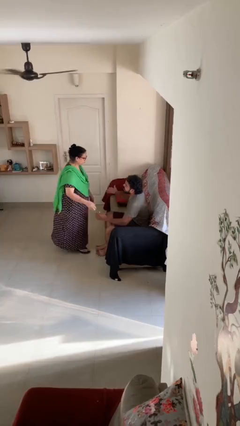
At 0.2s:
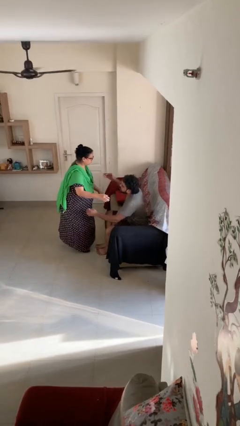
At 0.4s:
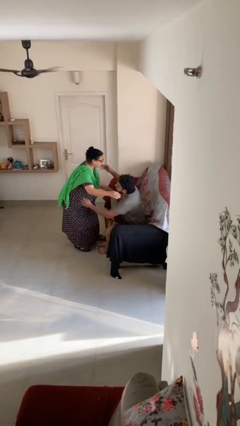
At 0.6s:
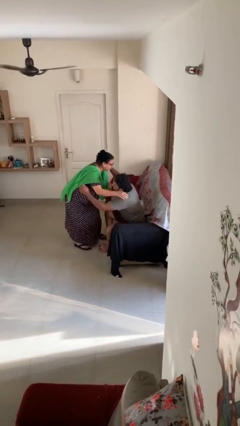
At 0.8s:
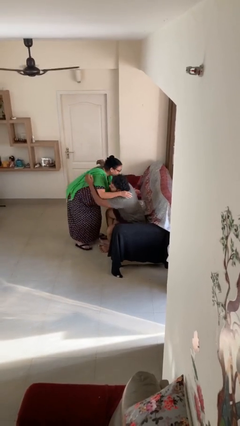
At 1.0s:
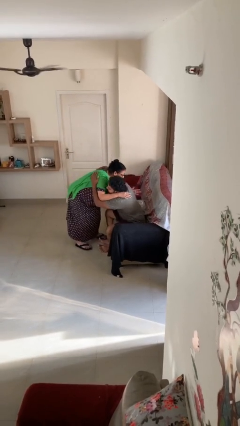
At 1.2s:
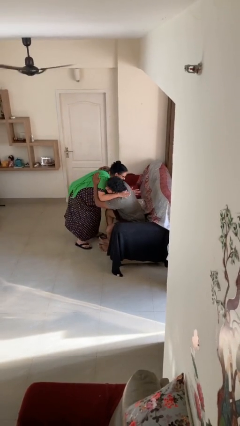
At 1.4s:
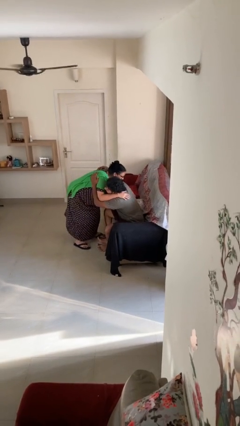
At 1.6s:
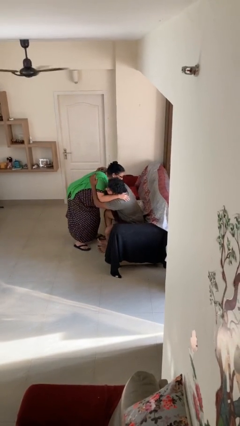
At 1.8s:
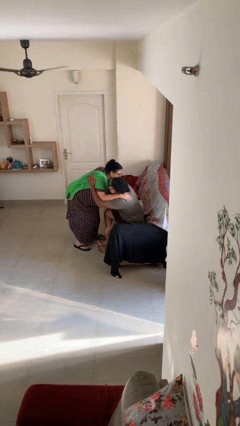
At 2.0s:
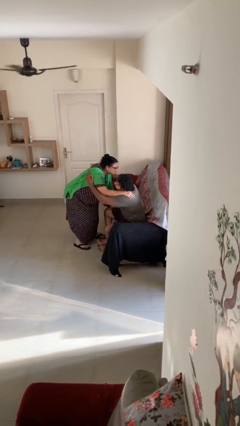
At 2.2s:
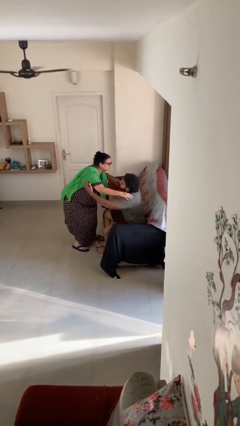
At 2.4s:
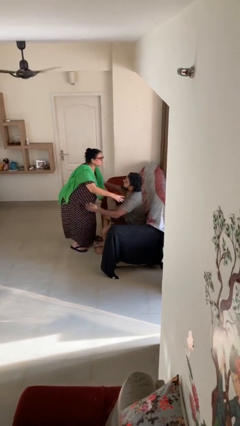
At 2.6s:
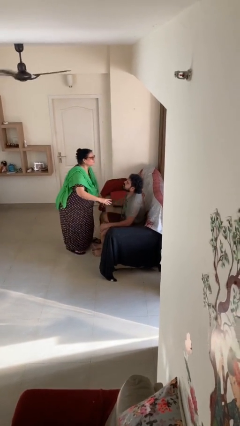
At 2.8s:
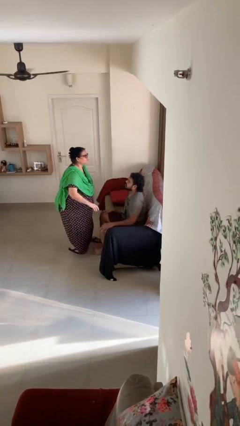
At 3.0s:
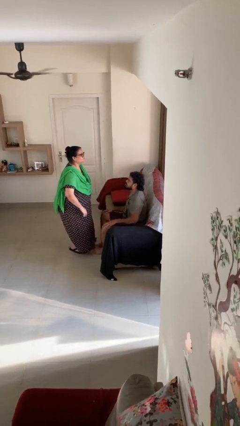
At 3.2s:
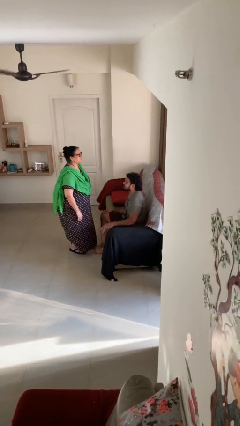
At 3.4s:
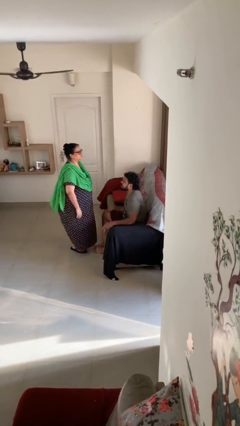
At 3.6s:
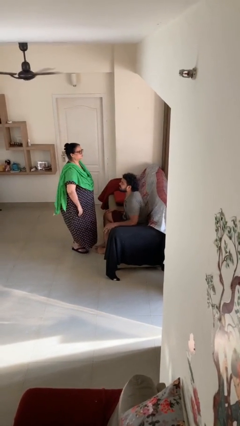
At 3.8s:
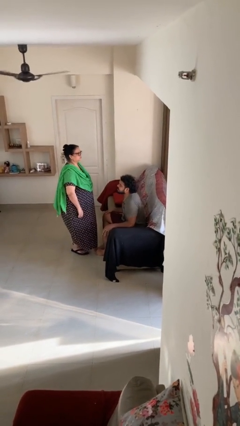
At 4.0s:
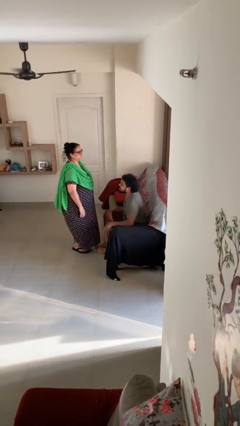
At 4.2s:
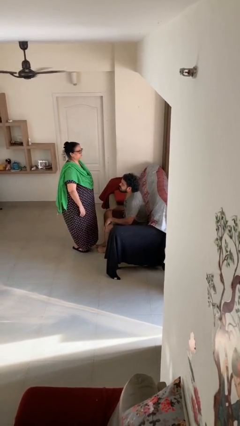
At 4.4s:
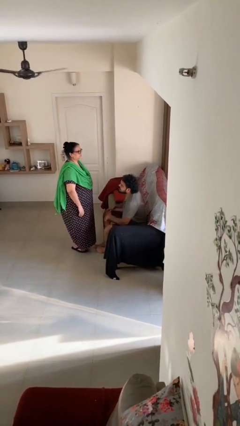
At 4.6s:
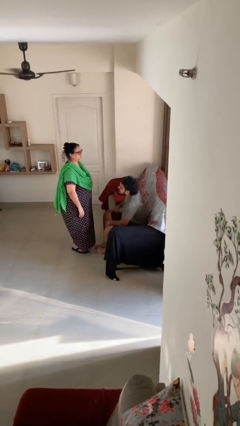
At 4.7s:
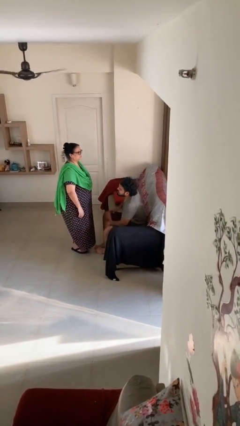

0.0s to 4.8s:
person embraces person

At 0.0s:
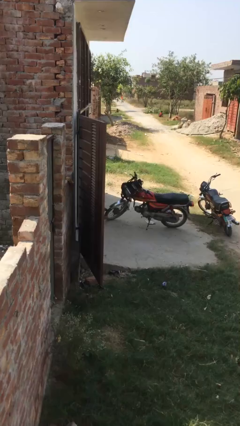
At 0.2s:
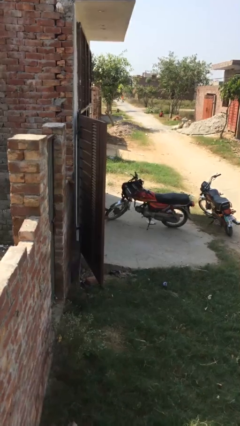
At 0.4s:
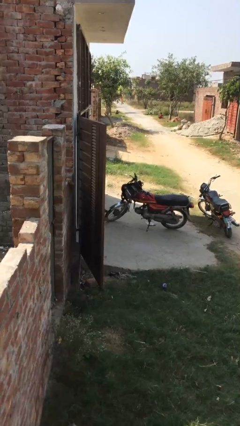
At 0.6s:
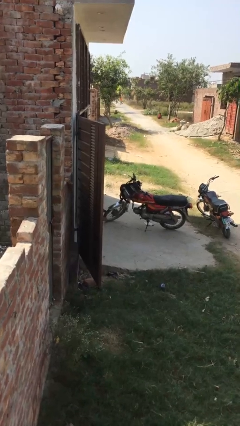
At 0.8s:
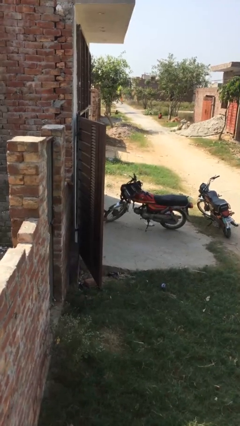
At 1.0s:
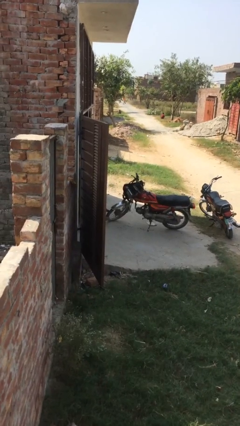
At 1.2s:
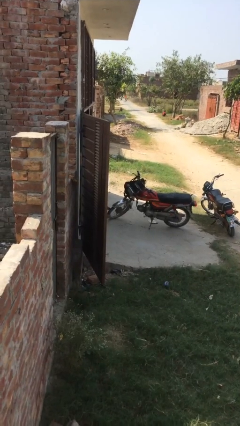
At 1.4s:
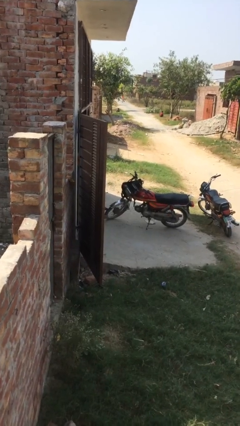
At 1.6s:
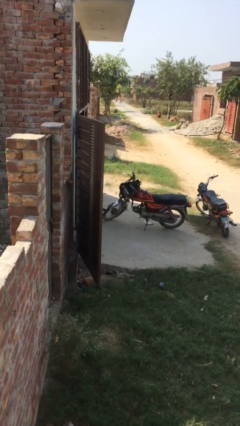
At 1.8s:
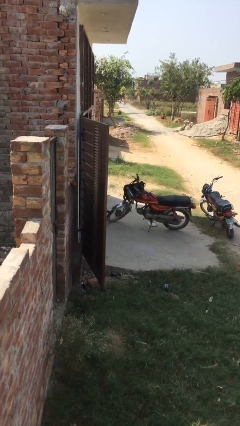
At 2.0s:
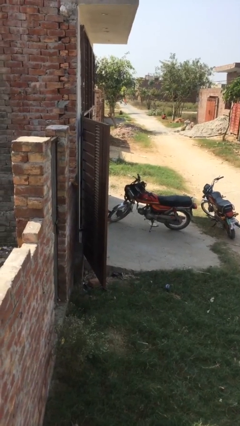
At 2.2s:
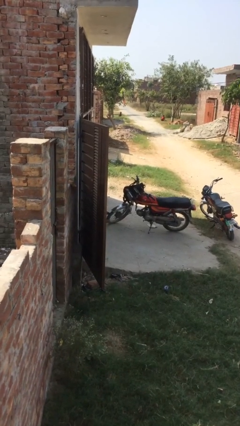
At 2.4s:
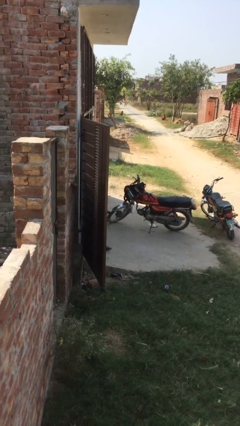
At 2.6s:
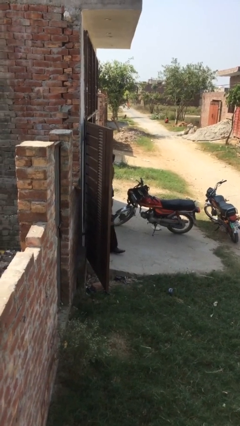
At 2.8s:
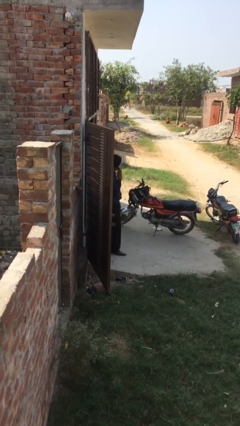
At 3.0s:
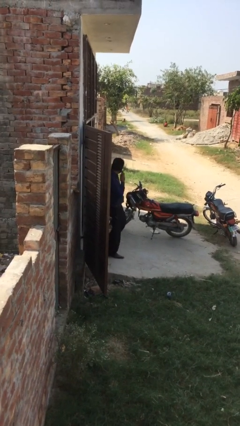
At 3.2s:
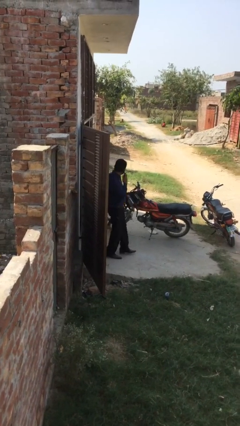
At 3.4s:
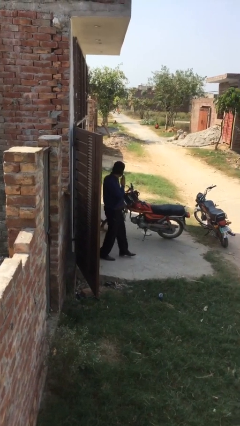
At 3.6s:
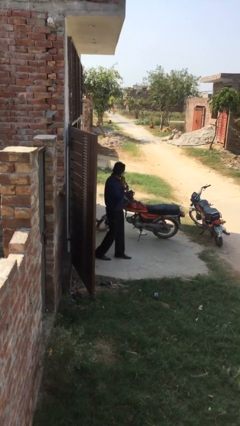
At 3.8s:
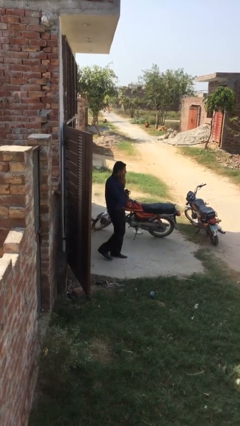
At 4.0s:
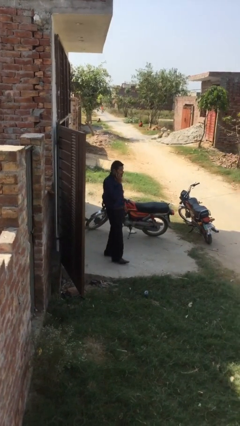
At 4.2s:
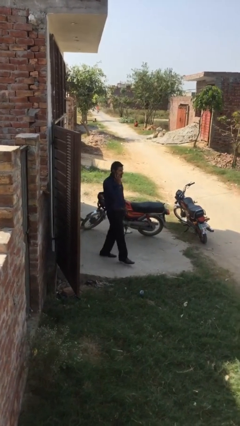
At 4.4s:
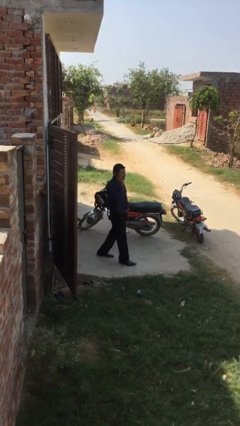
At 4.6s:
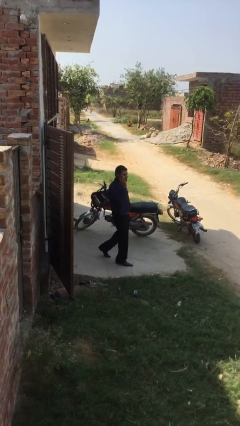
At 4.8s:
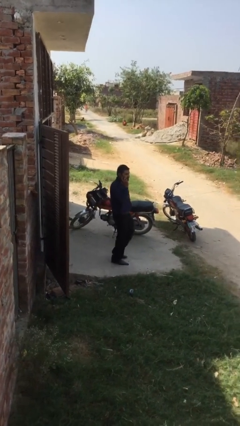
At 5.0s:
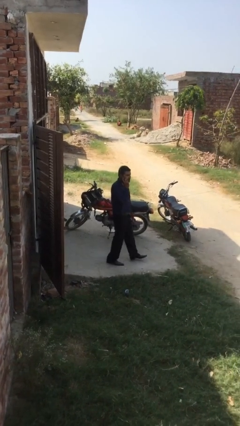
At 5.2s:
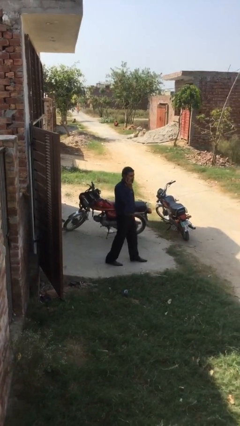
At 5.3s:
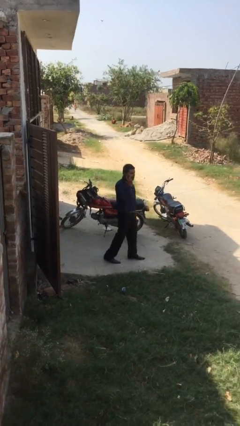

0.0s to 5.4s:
person enters scene through structure

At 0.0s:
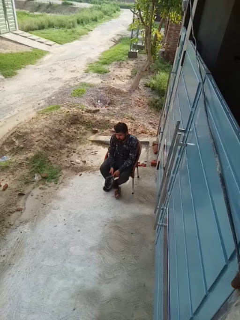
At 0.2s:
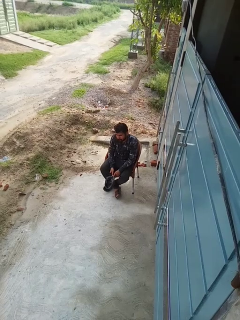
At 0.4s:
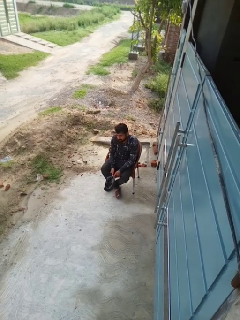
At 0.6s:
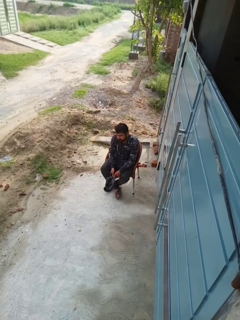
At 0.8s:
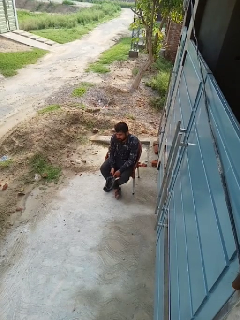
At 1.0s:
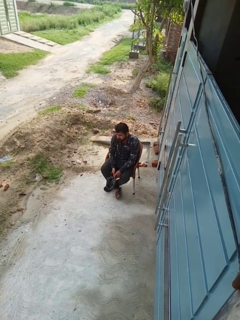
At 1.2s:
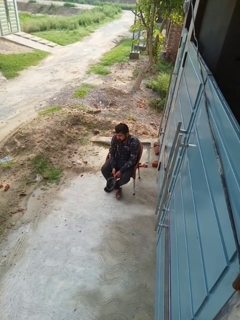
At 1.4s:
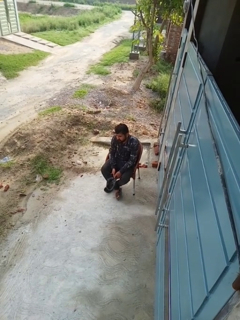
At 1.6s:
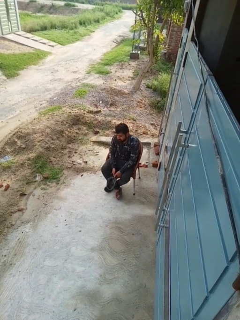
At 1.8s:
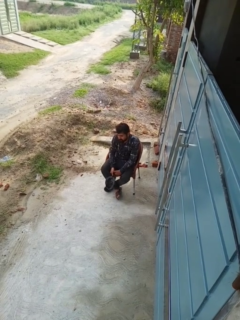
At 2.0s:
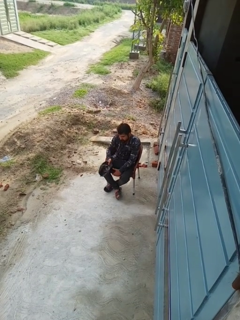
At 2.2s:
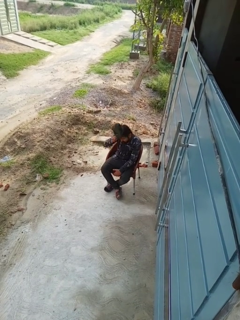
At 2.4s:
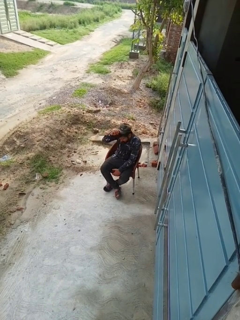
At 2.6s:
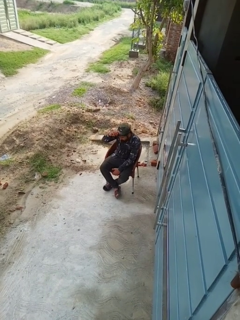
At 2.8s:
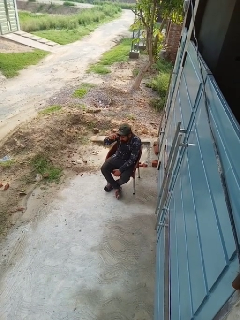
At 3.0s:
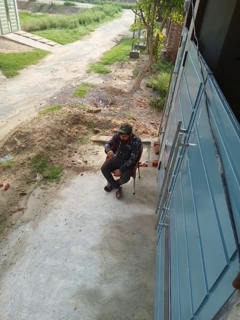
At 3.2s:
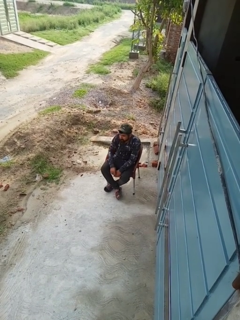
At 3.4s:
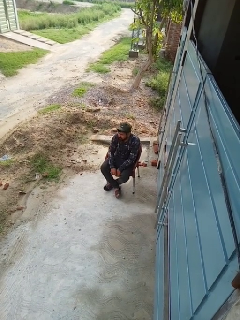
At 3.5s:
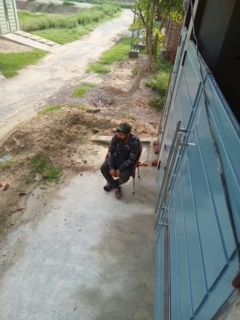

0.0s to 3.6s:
person puts on hat

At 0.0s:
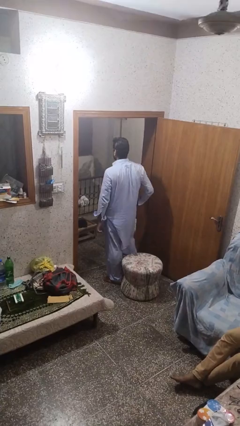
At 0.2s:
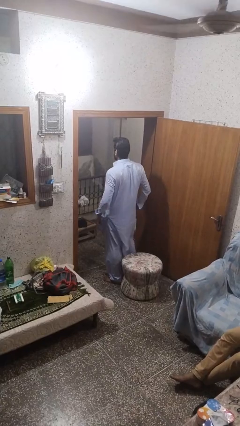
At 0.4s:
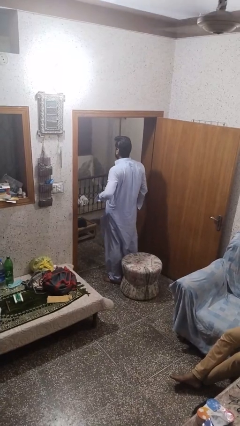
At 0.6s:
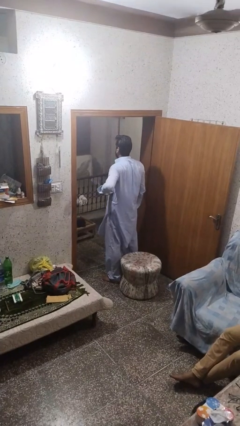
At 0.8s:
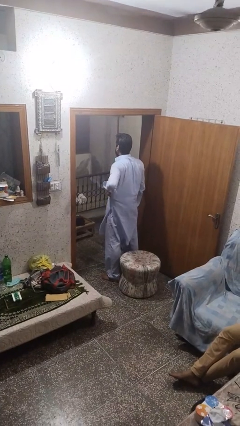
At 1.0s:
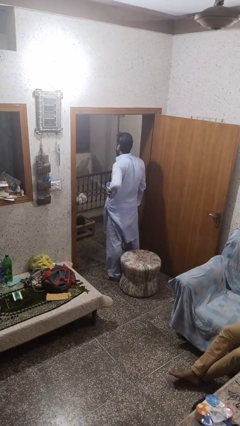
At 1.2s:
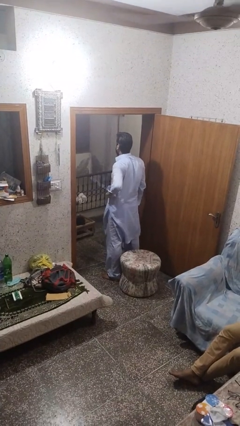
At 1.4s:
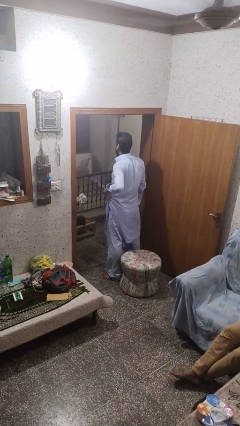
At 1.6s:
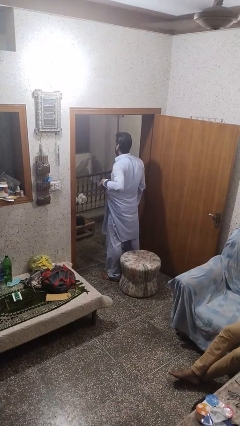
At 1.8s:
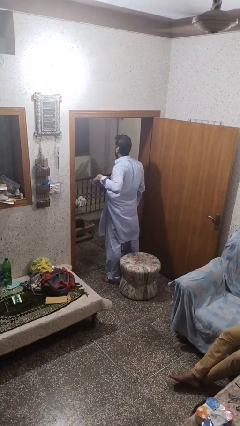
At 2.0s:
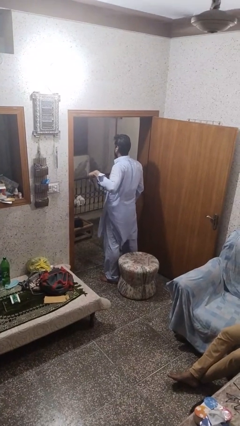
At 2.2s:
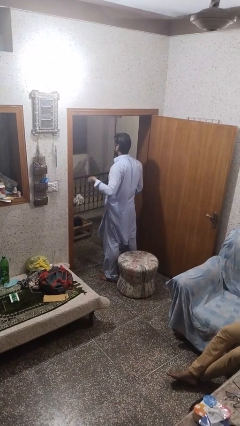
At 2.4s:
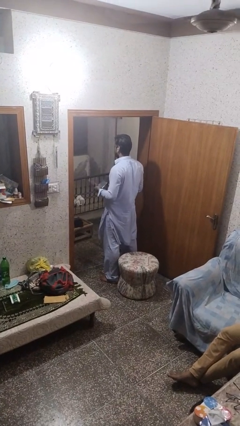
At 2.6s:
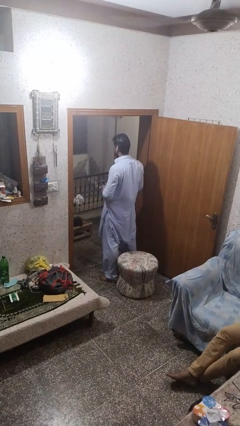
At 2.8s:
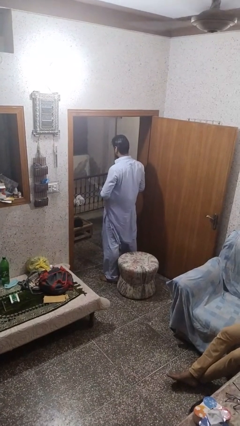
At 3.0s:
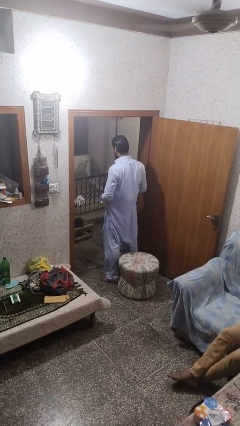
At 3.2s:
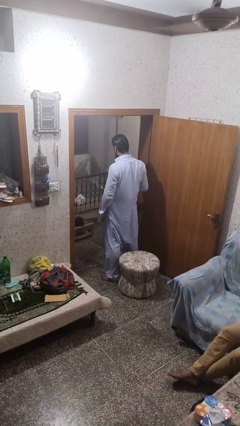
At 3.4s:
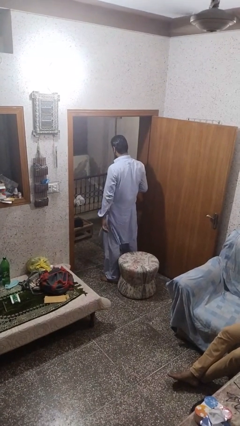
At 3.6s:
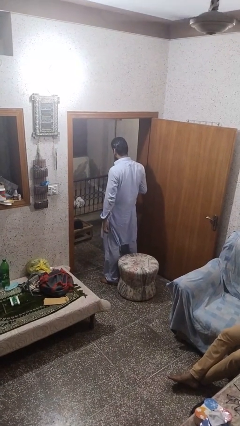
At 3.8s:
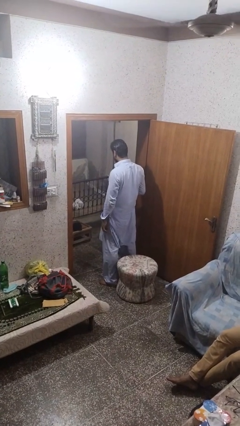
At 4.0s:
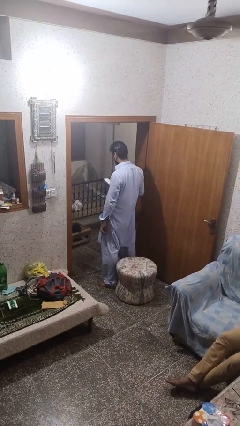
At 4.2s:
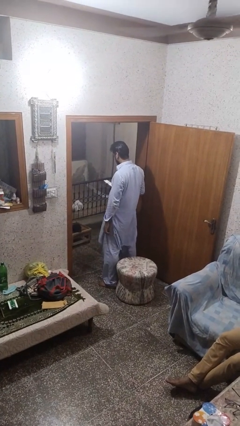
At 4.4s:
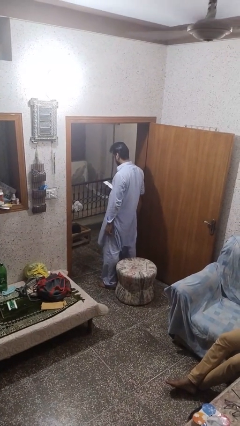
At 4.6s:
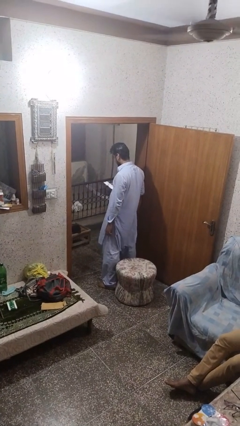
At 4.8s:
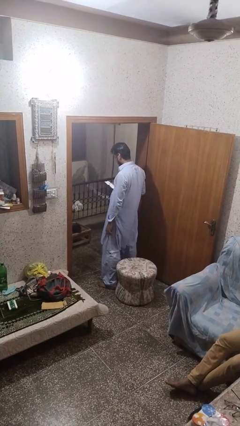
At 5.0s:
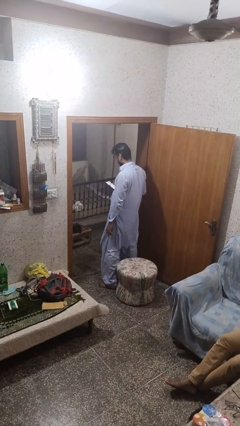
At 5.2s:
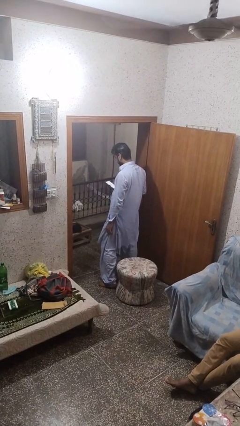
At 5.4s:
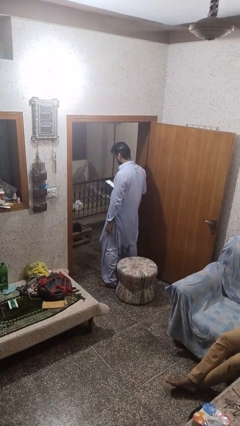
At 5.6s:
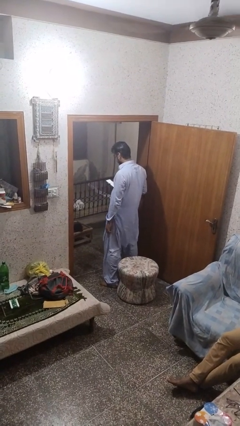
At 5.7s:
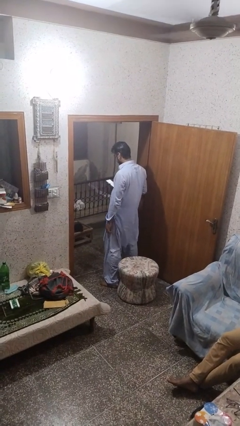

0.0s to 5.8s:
person takes phone from pocket
